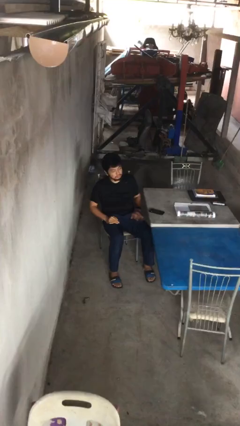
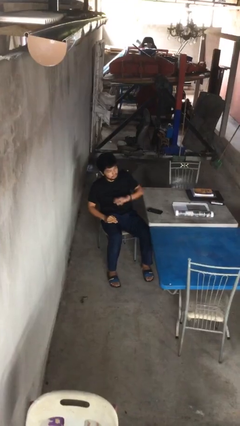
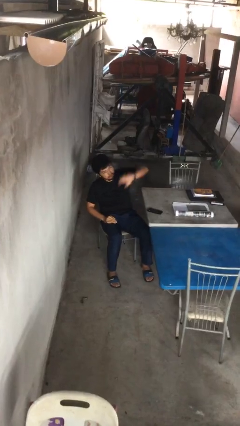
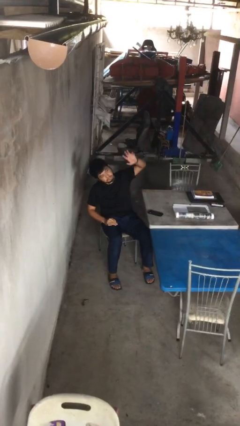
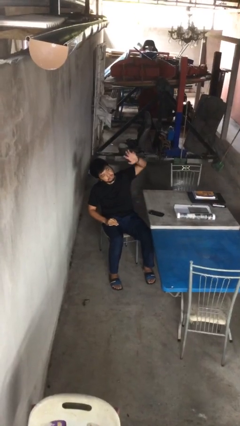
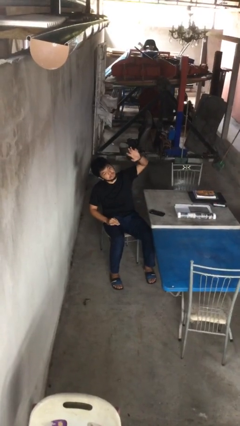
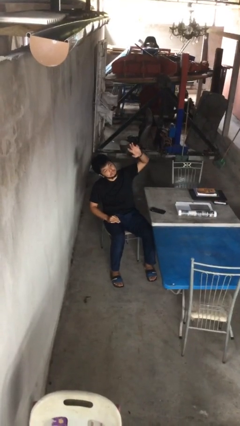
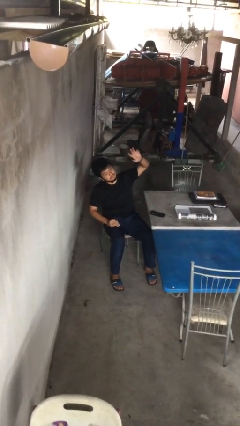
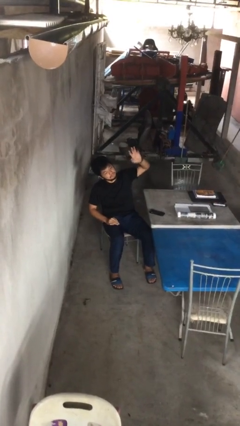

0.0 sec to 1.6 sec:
person gestures swipe up

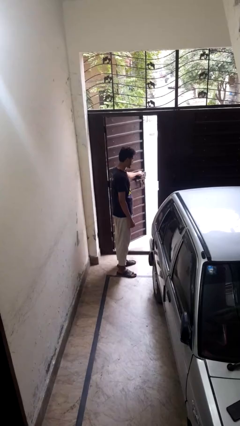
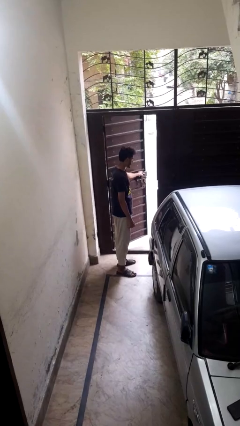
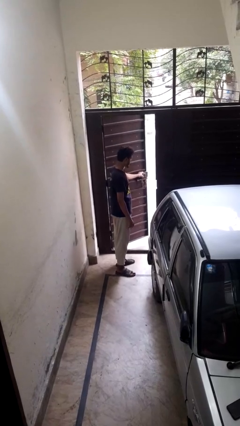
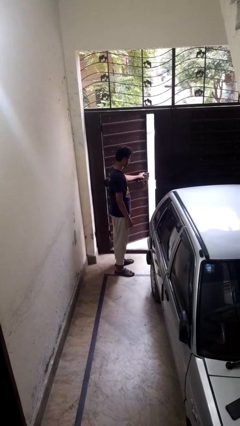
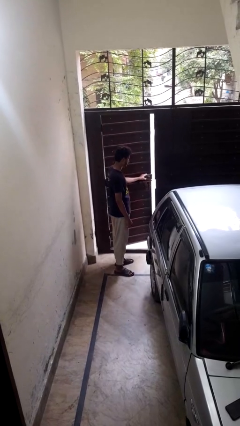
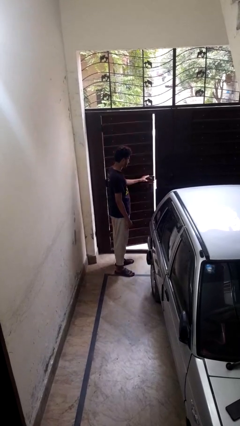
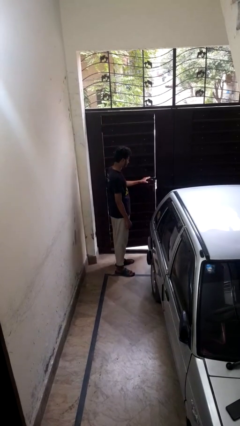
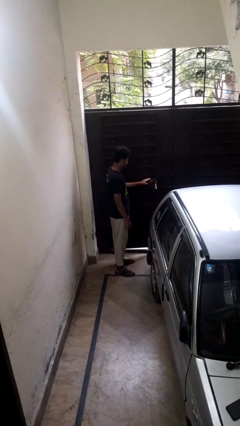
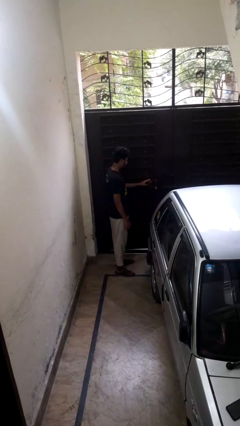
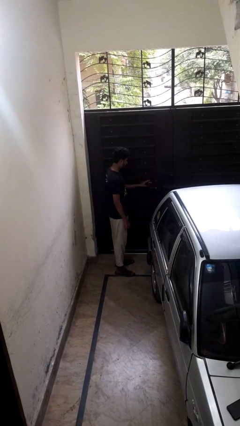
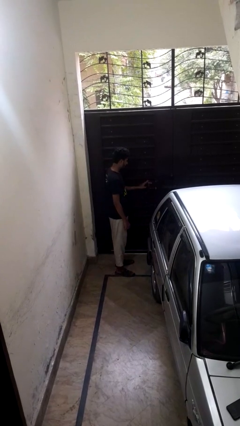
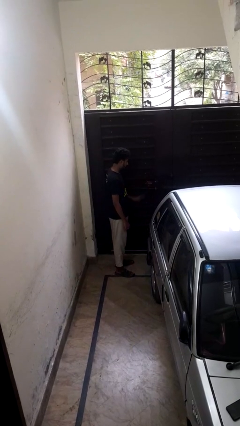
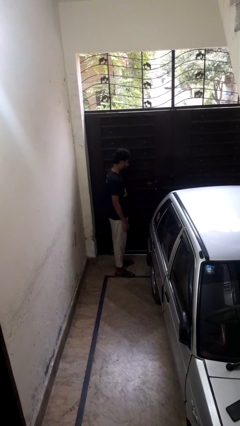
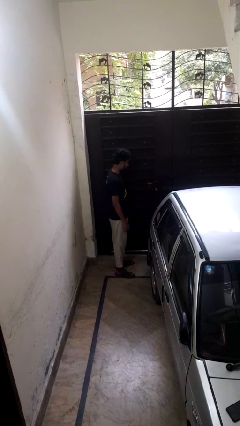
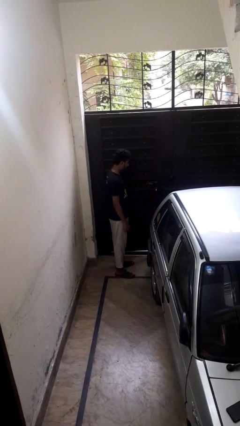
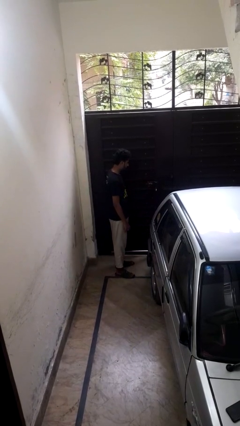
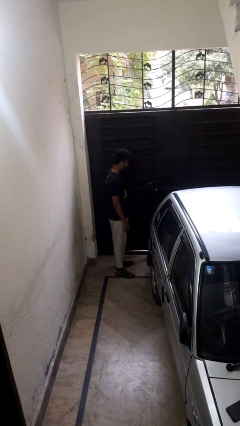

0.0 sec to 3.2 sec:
person closes gate

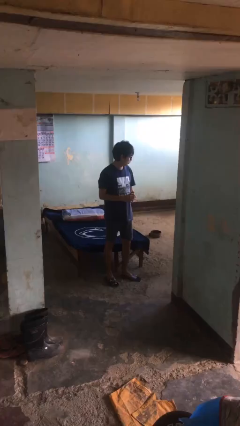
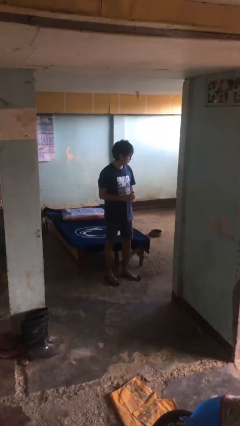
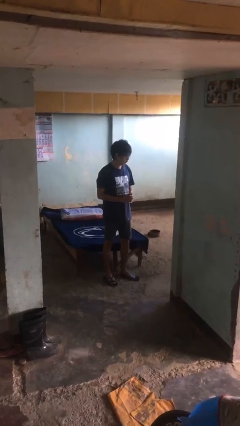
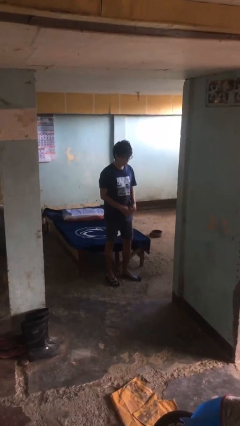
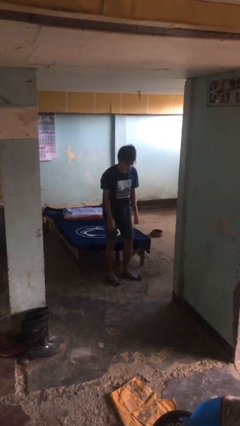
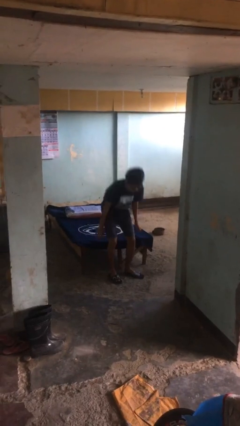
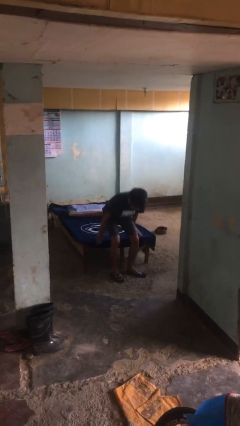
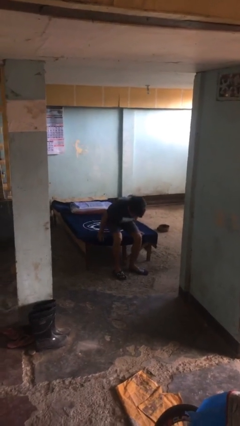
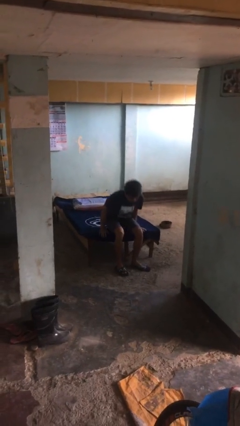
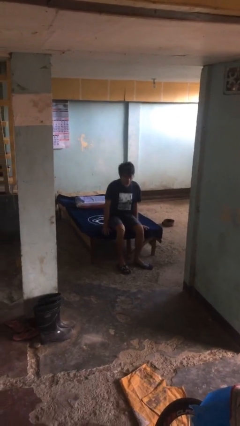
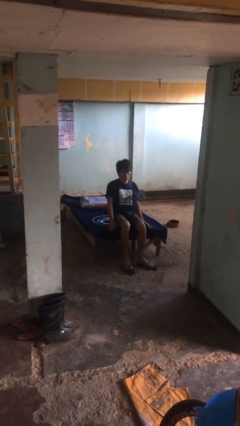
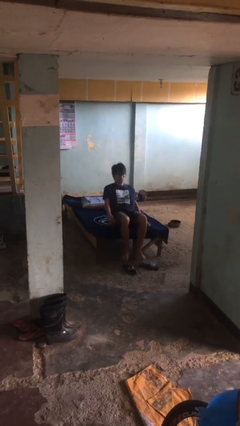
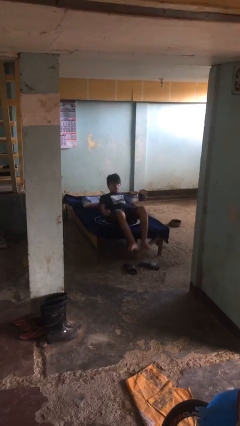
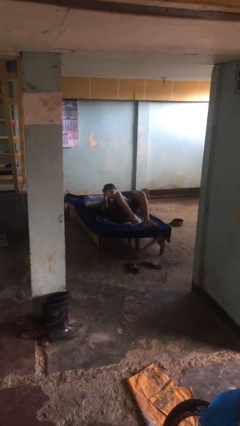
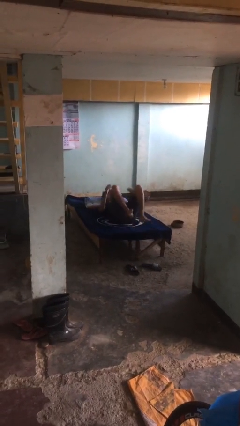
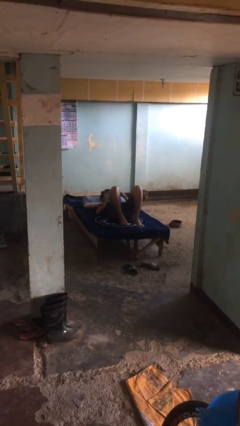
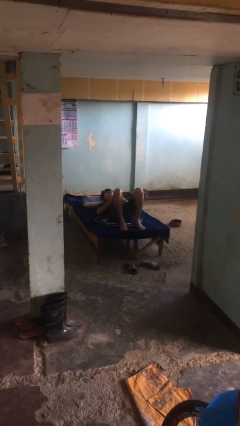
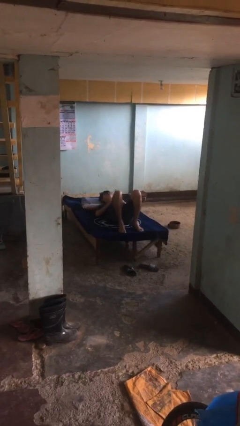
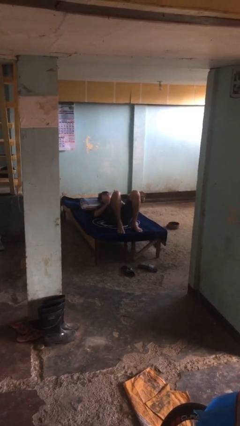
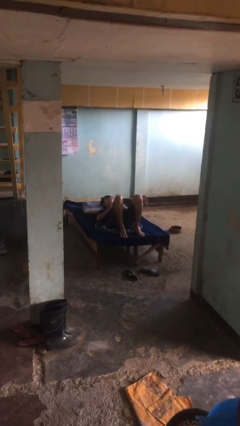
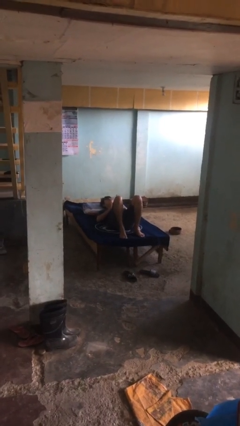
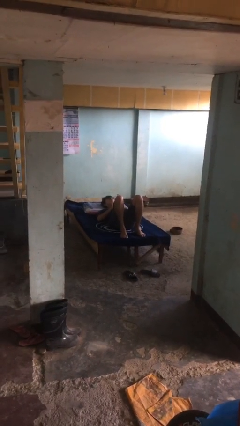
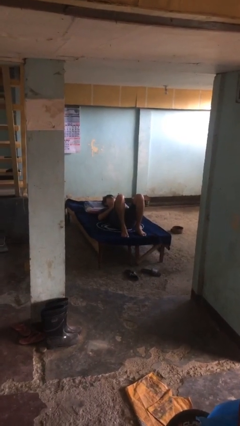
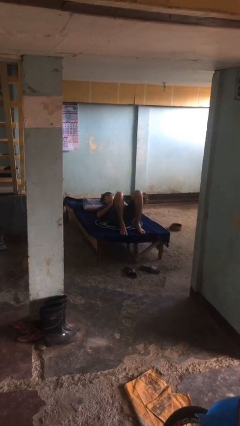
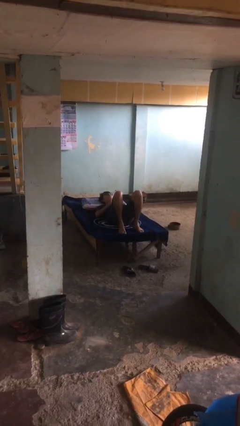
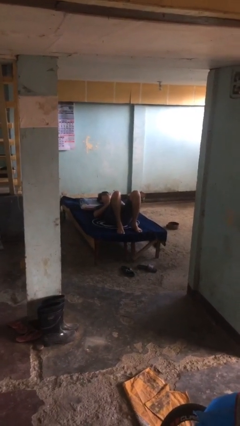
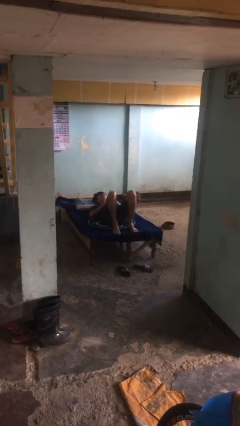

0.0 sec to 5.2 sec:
person lies down on bed

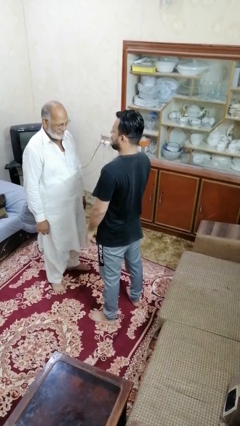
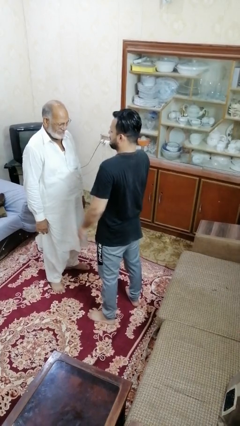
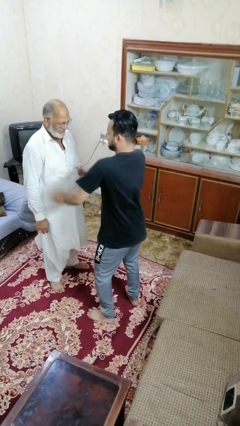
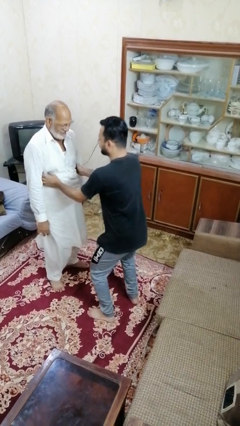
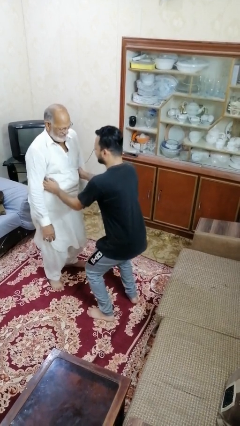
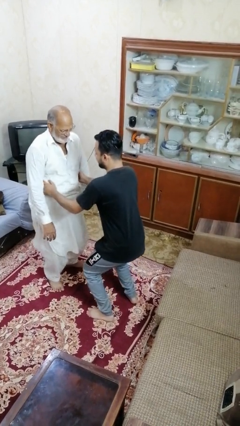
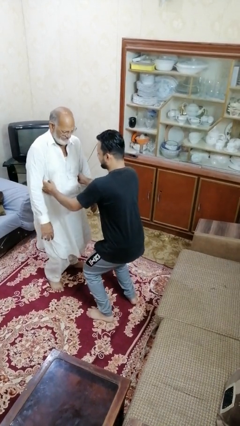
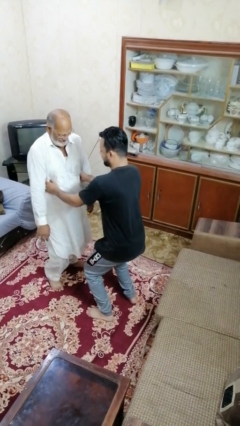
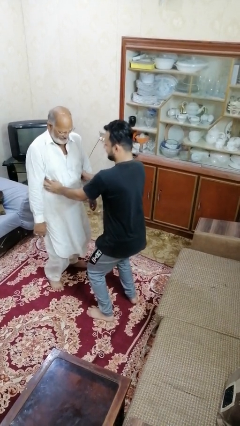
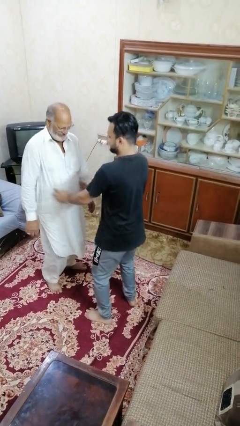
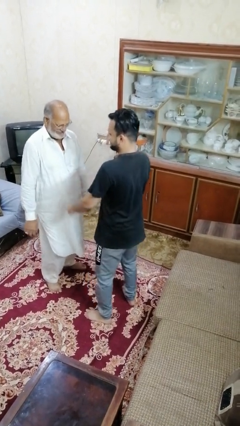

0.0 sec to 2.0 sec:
person tickles person

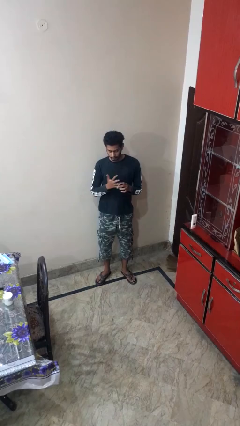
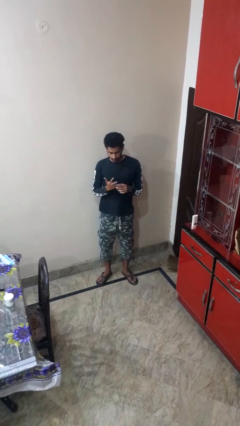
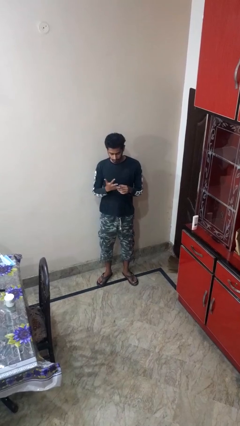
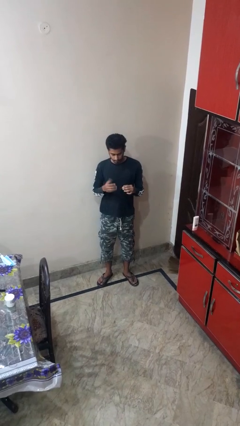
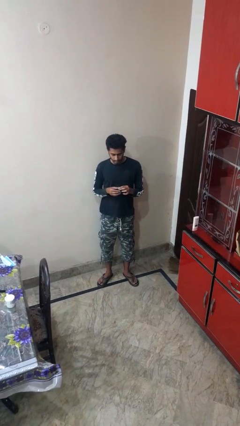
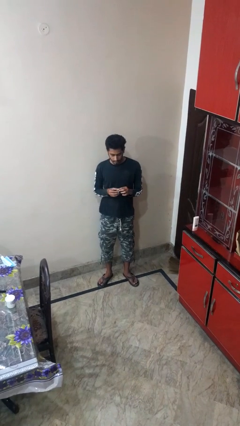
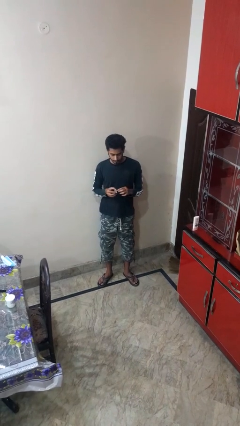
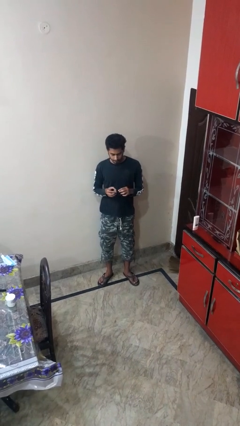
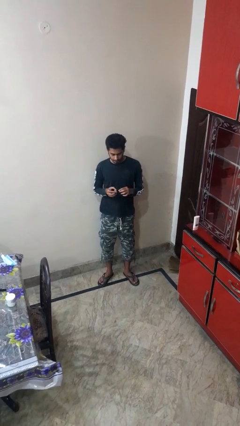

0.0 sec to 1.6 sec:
person takes off ring

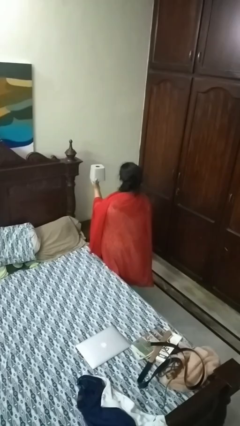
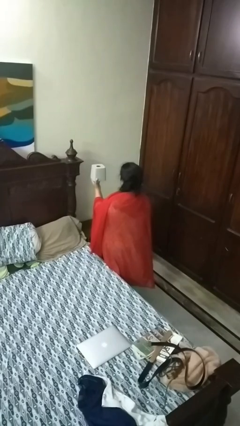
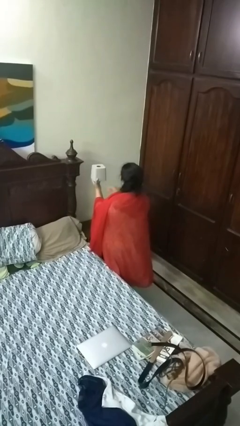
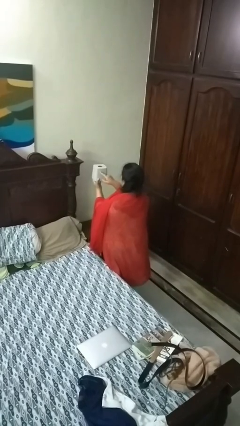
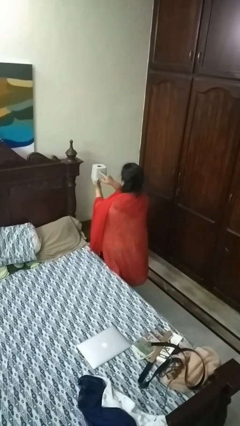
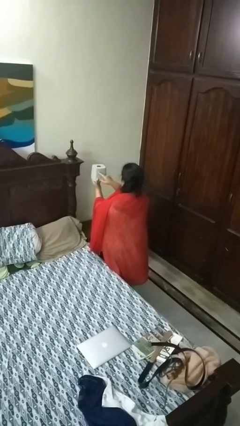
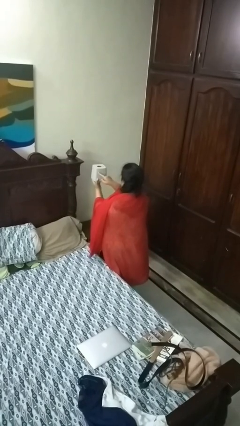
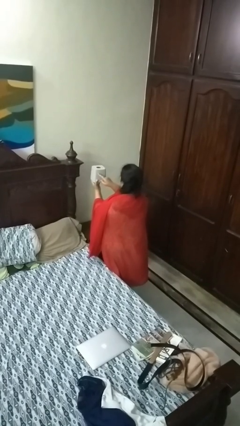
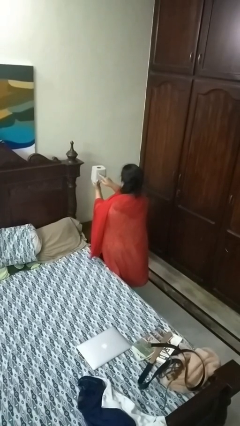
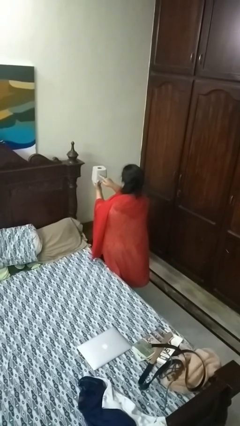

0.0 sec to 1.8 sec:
person taps object with finger

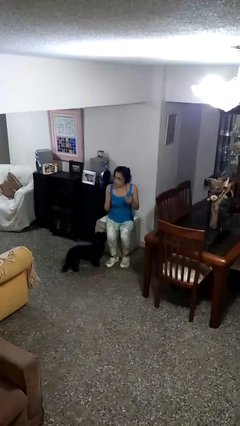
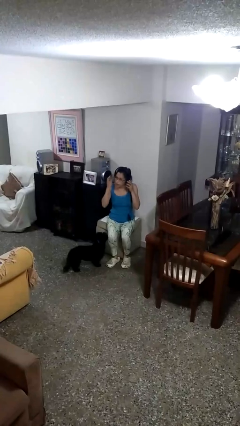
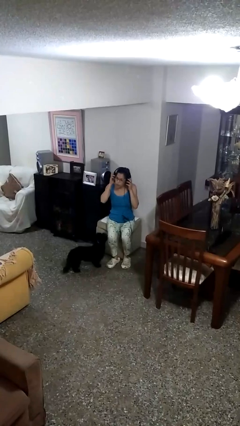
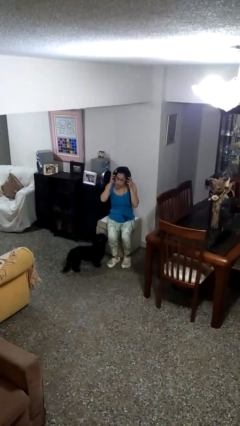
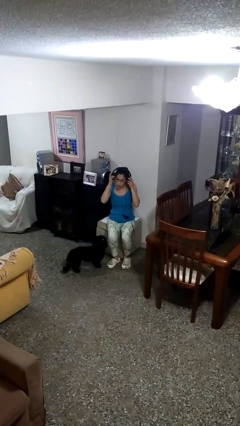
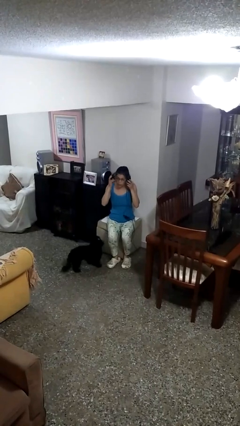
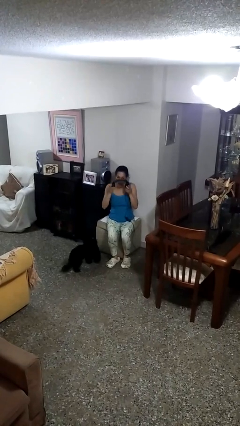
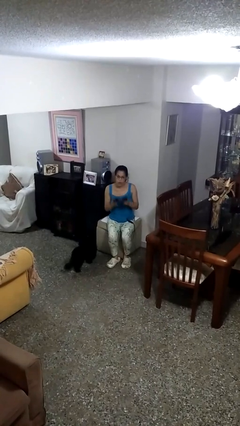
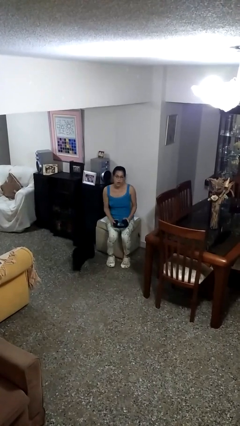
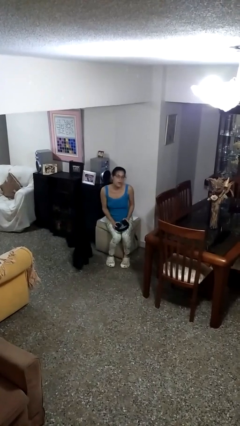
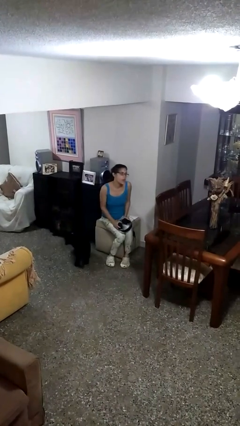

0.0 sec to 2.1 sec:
person takes off headphones
